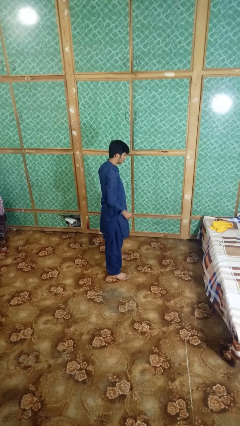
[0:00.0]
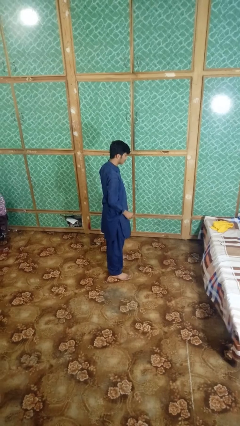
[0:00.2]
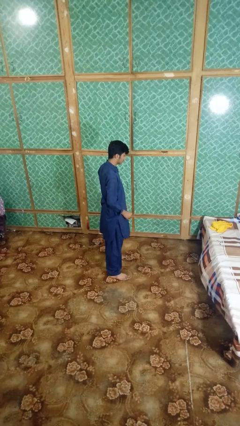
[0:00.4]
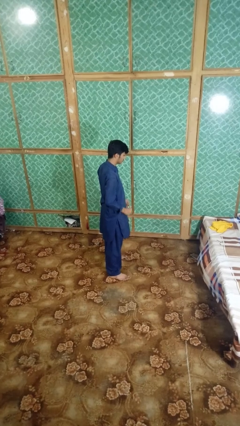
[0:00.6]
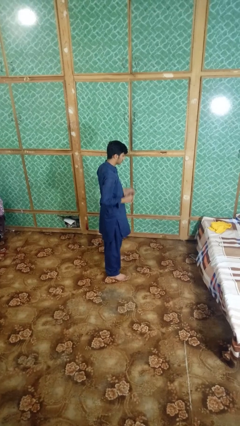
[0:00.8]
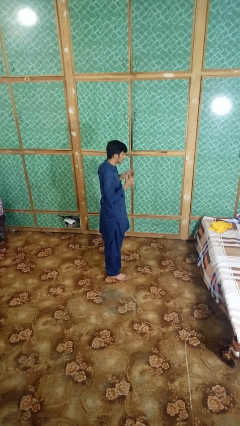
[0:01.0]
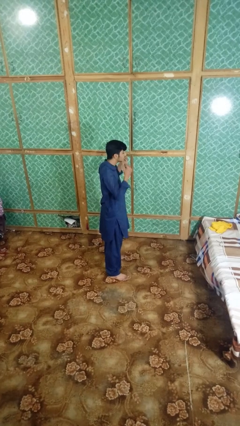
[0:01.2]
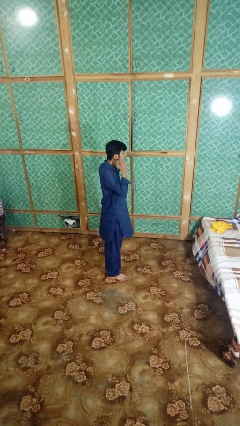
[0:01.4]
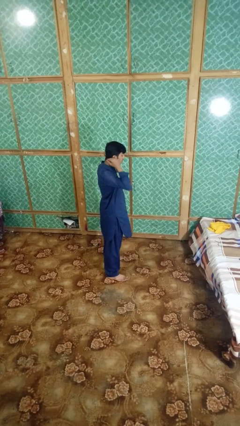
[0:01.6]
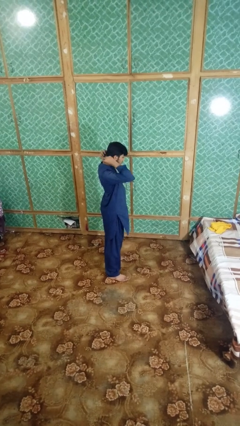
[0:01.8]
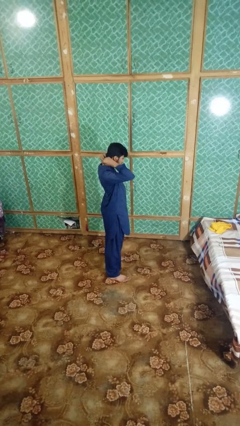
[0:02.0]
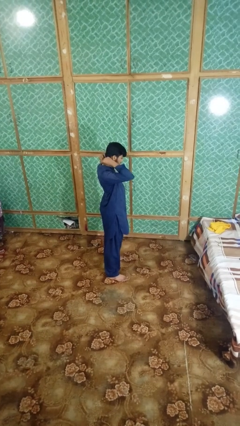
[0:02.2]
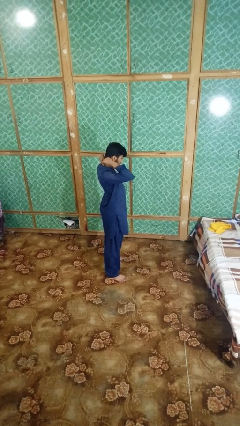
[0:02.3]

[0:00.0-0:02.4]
person puts on necklace

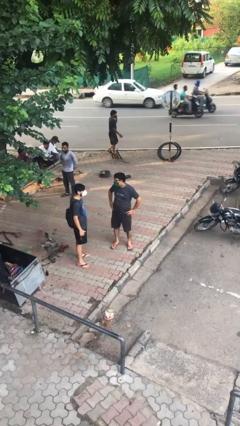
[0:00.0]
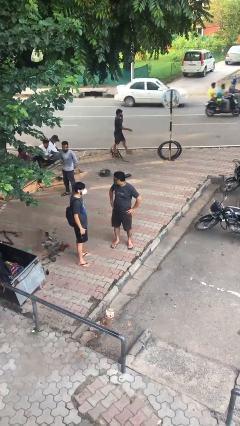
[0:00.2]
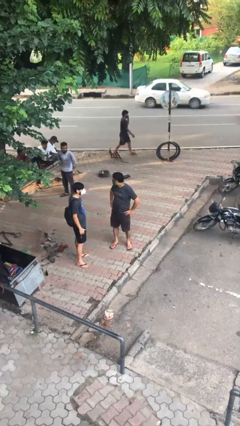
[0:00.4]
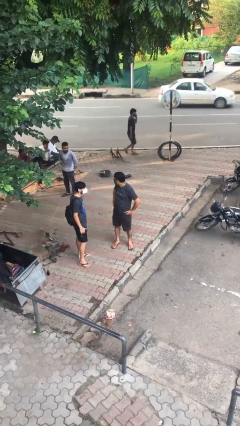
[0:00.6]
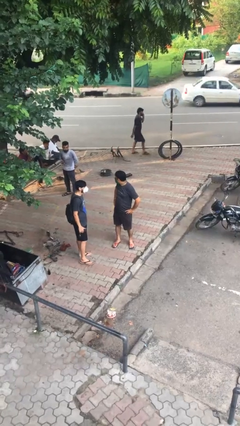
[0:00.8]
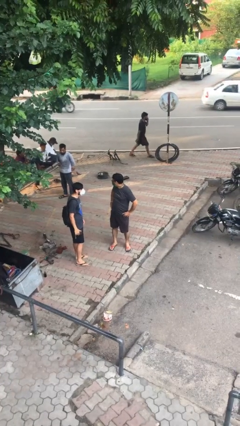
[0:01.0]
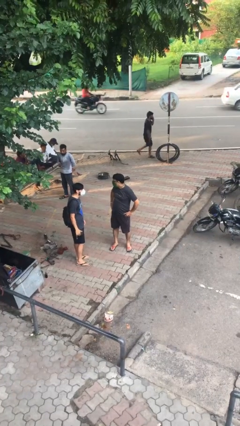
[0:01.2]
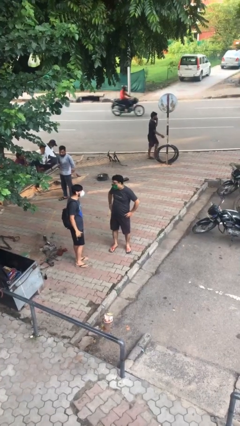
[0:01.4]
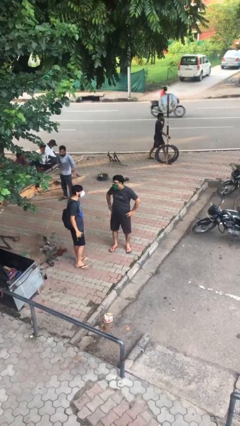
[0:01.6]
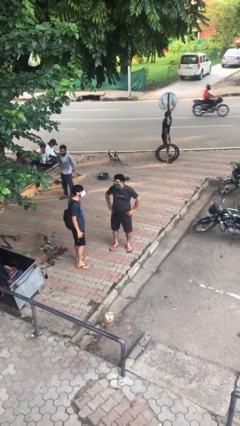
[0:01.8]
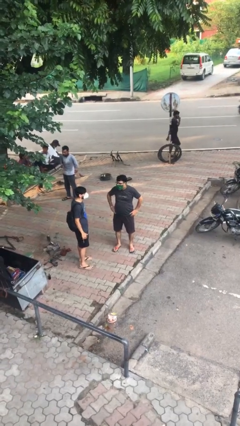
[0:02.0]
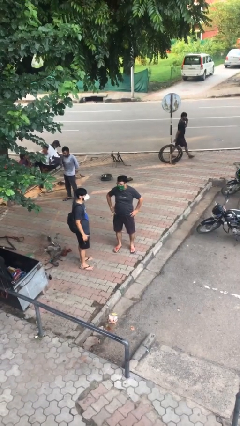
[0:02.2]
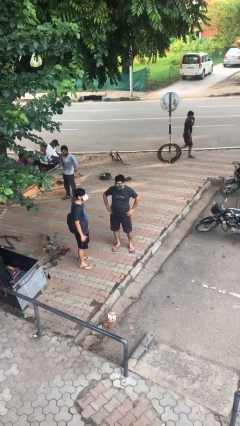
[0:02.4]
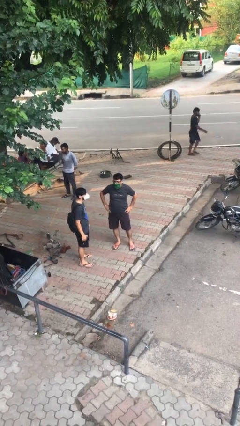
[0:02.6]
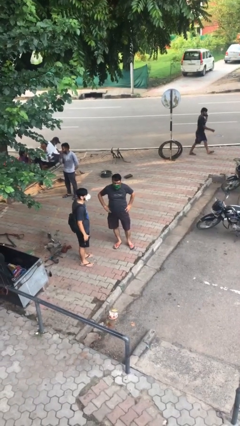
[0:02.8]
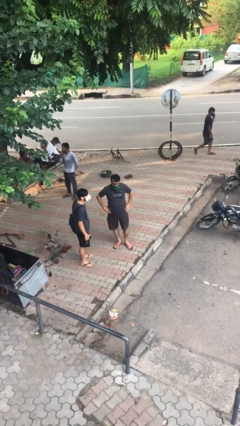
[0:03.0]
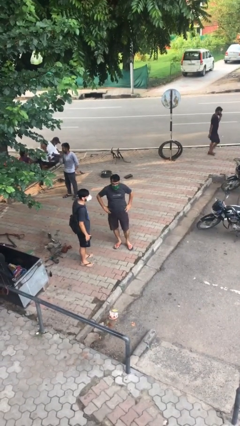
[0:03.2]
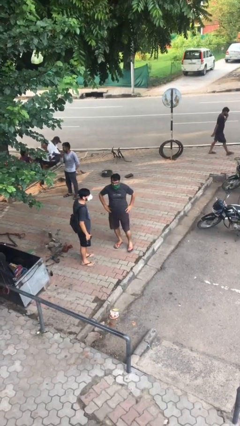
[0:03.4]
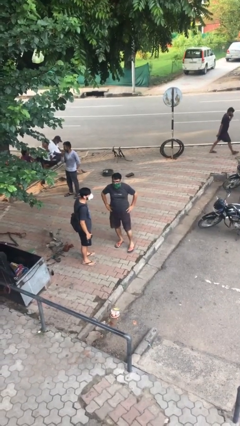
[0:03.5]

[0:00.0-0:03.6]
person talks to person

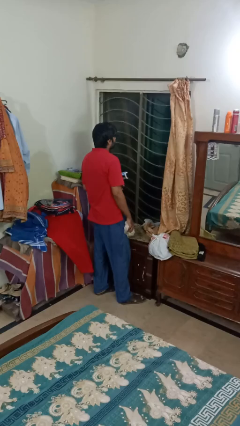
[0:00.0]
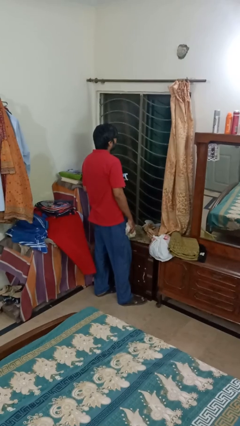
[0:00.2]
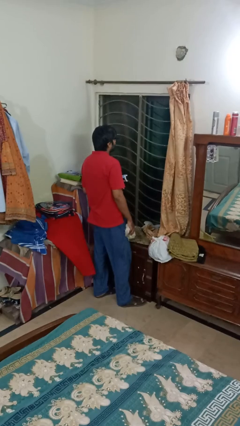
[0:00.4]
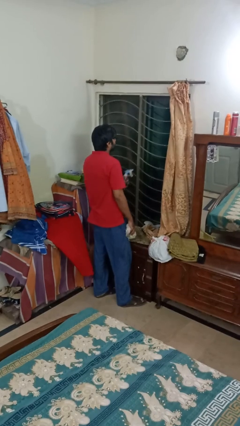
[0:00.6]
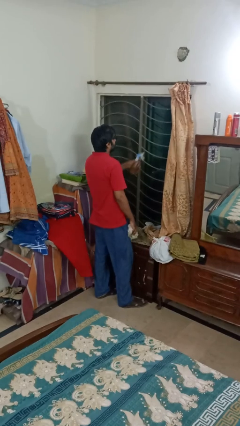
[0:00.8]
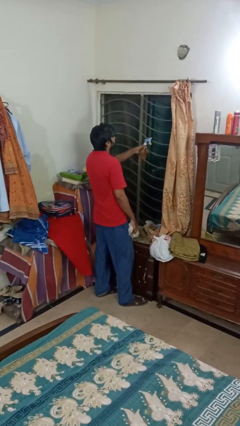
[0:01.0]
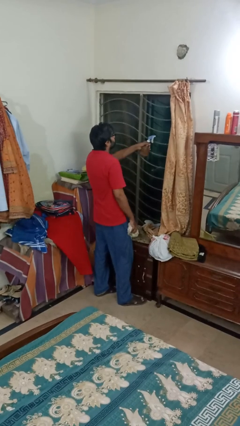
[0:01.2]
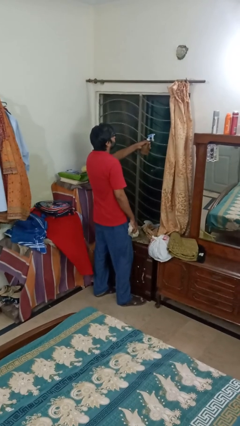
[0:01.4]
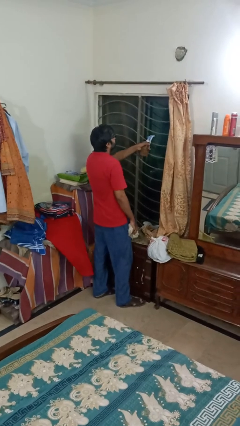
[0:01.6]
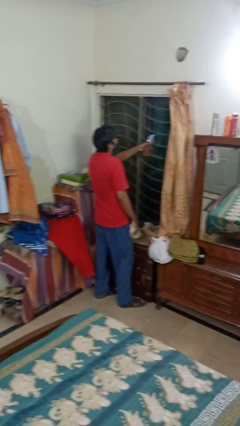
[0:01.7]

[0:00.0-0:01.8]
person sprays from bottle

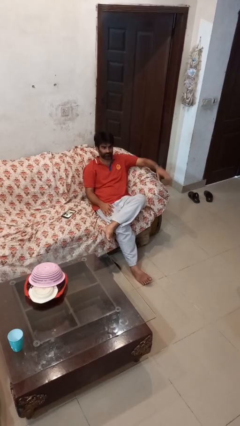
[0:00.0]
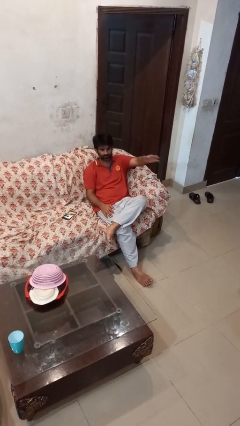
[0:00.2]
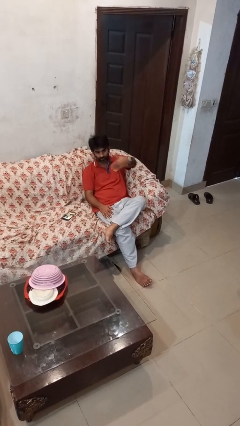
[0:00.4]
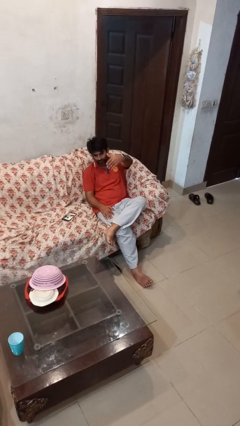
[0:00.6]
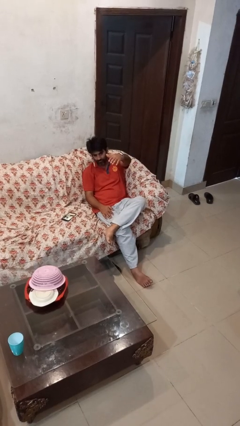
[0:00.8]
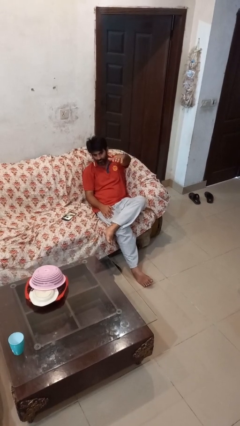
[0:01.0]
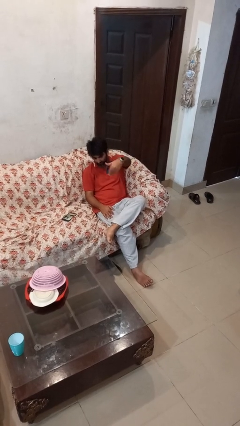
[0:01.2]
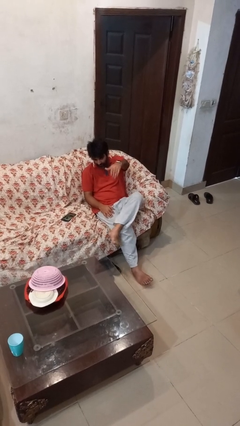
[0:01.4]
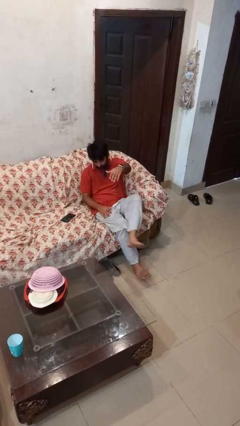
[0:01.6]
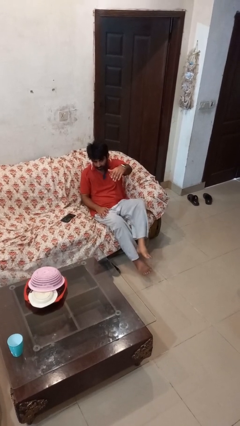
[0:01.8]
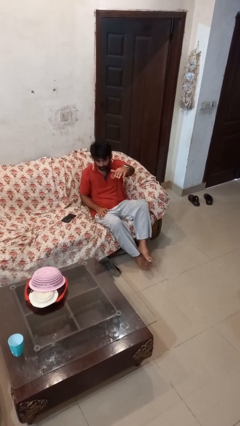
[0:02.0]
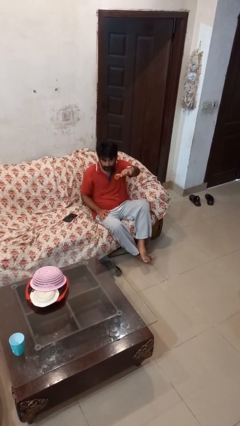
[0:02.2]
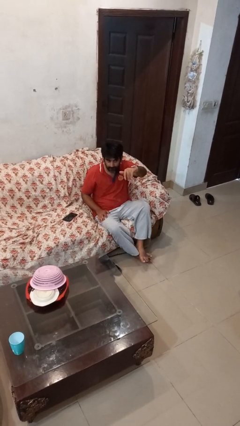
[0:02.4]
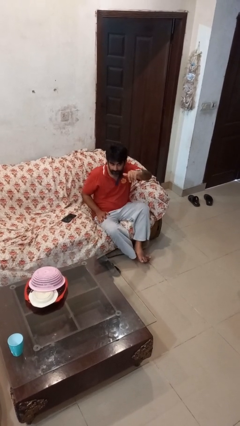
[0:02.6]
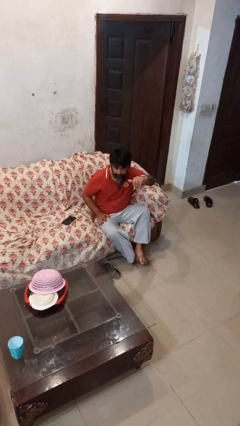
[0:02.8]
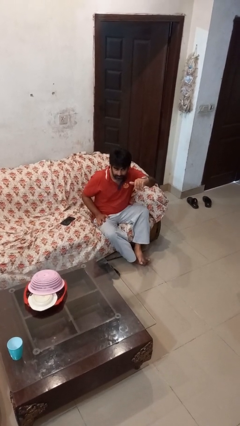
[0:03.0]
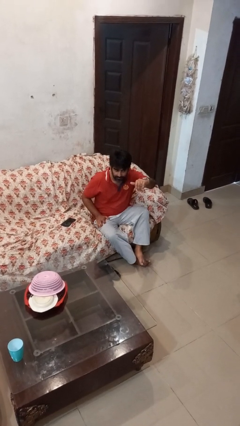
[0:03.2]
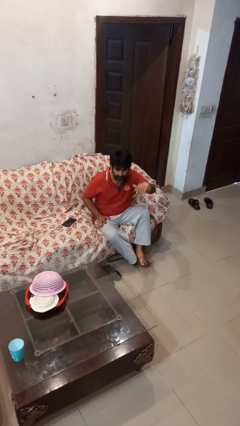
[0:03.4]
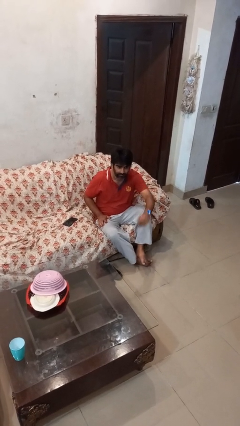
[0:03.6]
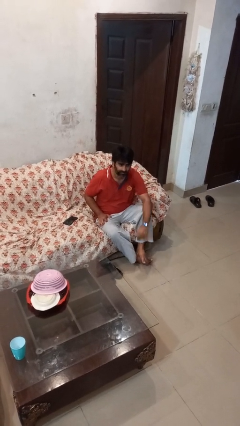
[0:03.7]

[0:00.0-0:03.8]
person gestures come here

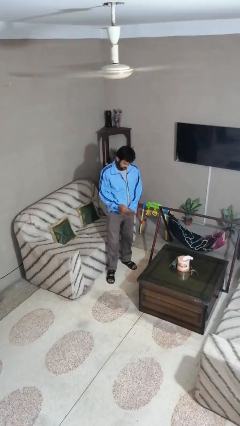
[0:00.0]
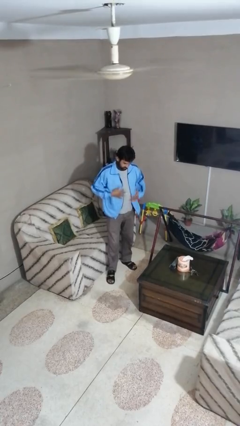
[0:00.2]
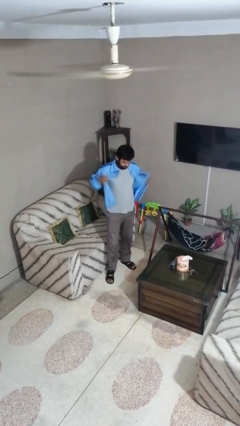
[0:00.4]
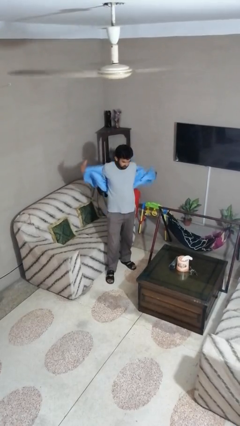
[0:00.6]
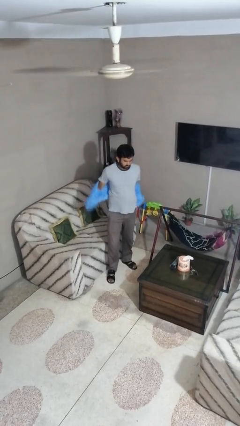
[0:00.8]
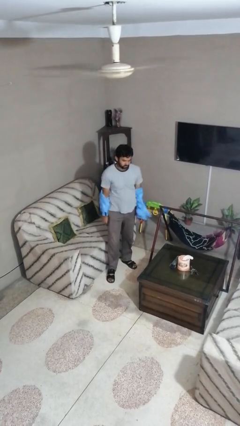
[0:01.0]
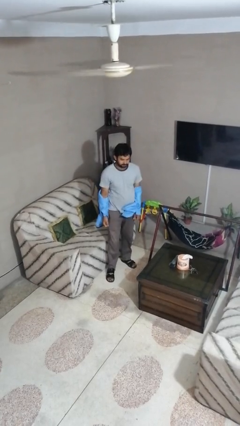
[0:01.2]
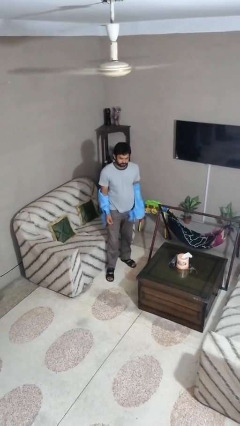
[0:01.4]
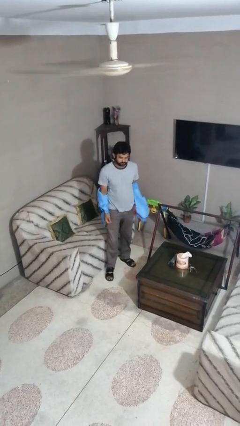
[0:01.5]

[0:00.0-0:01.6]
person takes off jacket

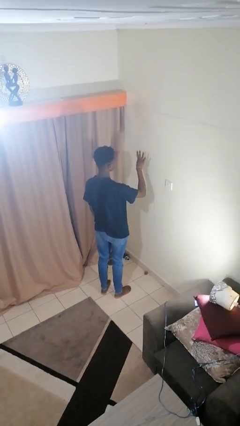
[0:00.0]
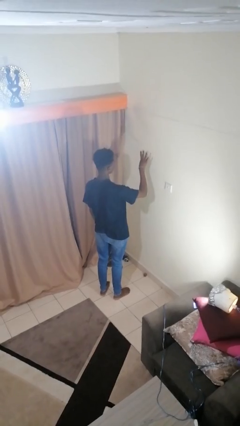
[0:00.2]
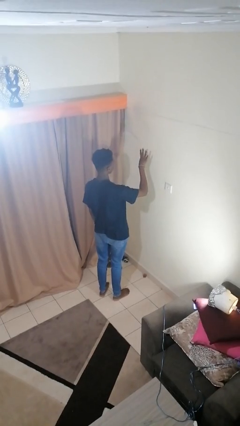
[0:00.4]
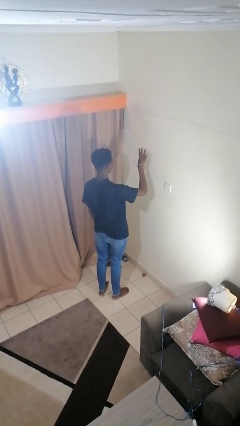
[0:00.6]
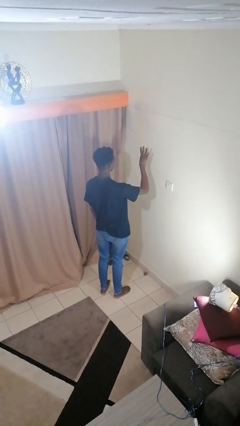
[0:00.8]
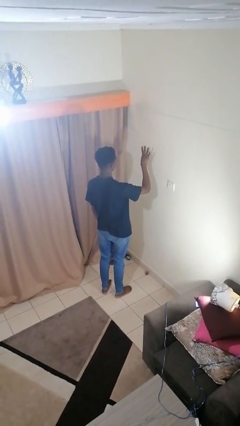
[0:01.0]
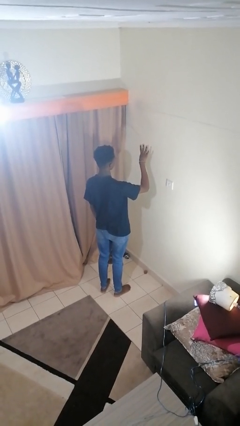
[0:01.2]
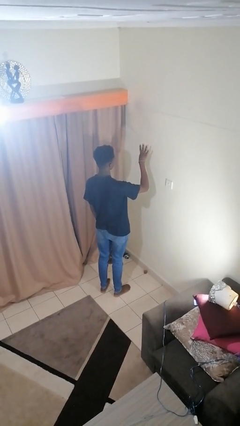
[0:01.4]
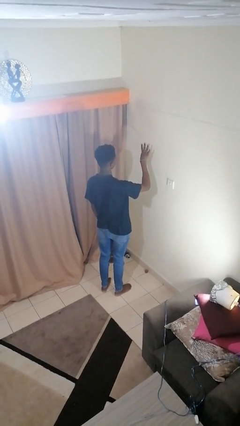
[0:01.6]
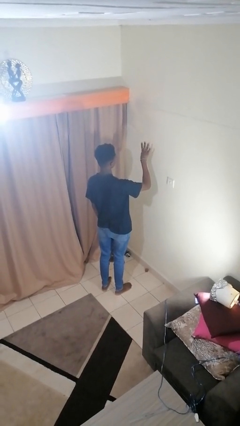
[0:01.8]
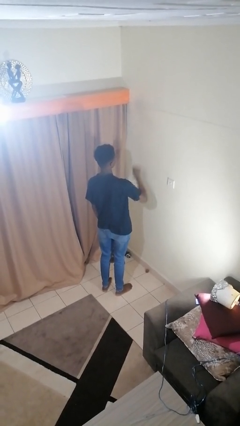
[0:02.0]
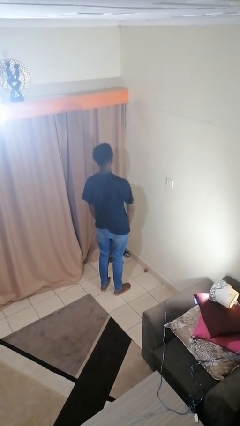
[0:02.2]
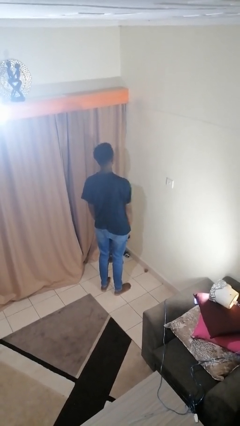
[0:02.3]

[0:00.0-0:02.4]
person gestures number four

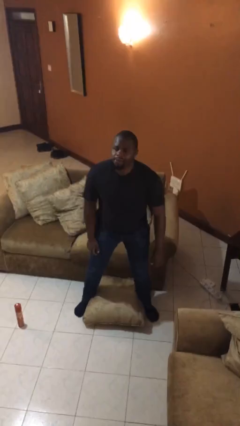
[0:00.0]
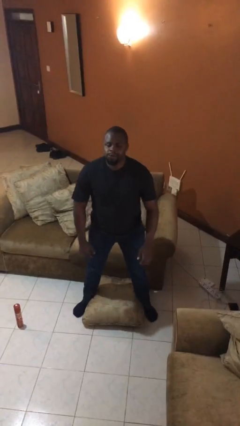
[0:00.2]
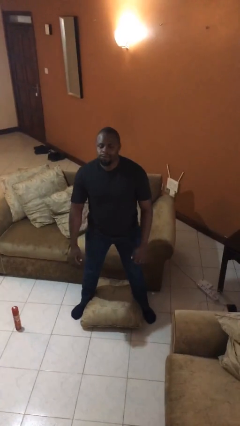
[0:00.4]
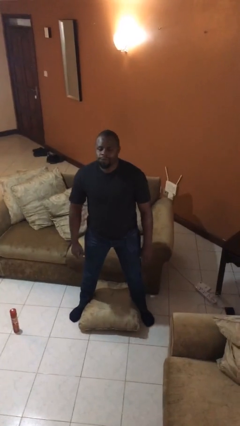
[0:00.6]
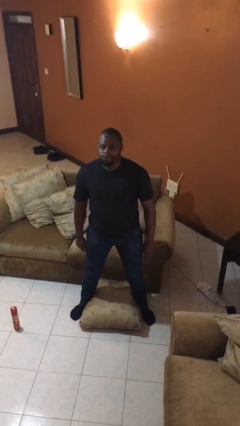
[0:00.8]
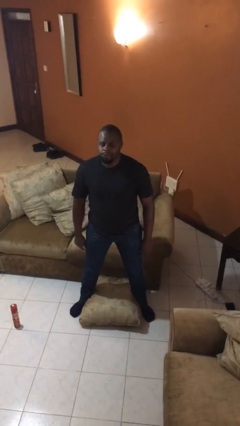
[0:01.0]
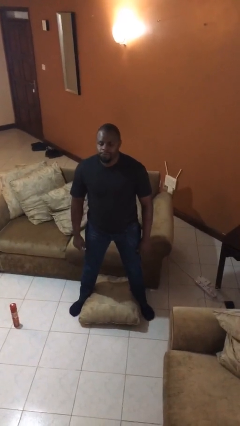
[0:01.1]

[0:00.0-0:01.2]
person stands up from floor

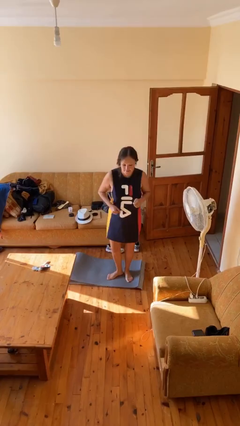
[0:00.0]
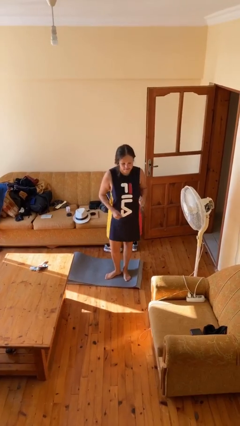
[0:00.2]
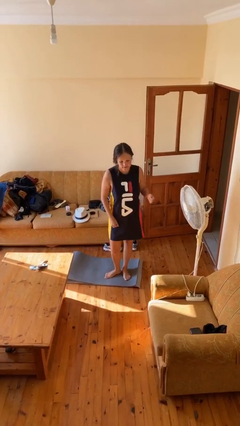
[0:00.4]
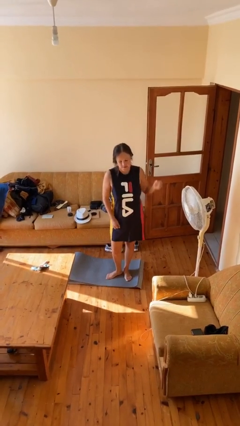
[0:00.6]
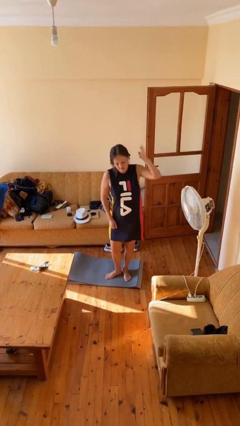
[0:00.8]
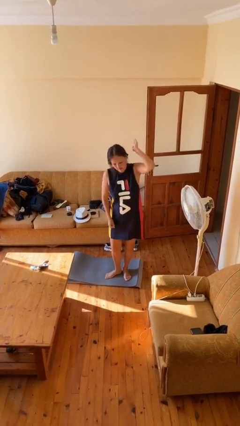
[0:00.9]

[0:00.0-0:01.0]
person karate chop
